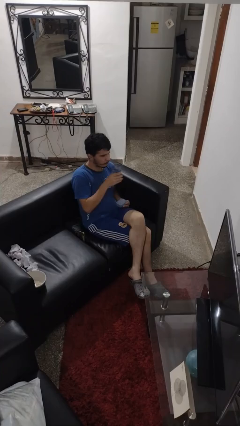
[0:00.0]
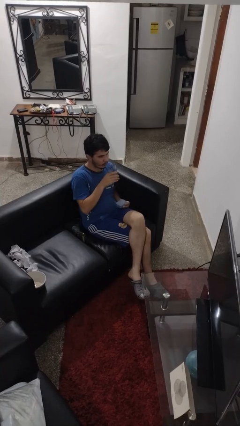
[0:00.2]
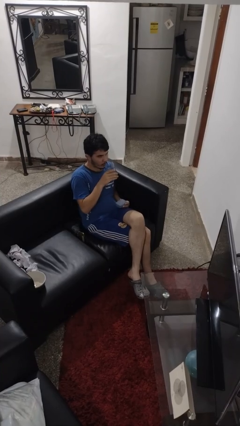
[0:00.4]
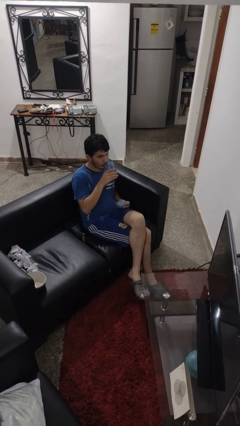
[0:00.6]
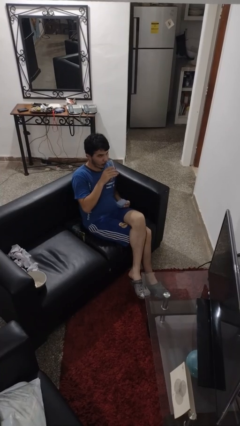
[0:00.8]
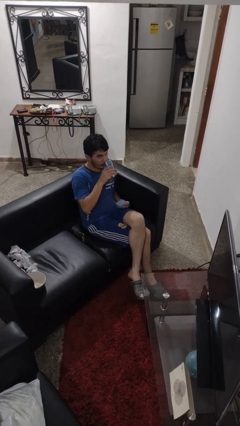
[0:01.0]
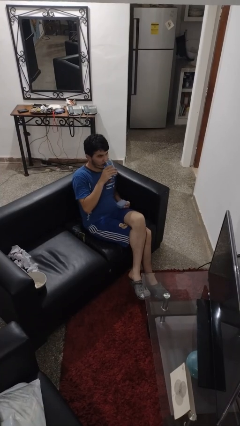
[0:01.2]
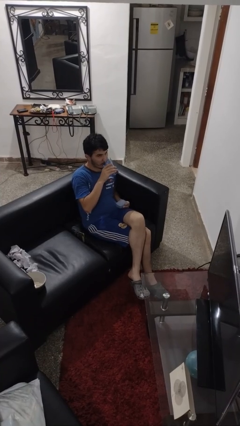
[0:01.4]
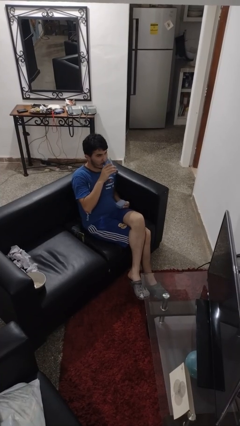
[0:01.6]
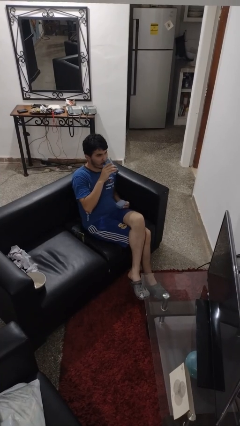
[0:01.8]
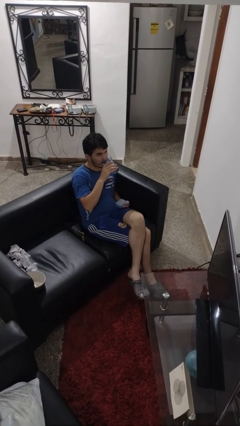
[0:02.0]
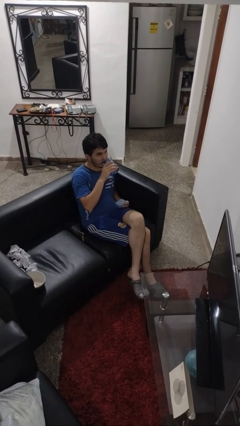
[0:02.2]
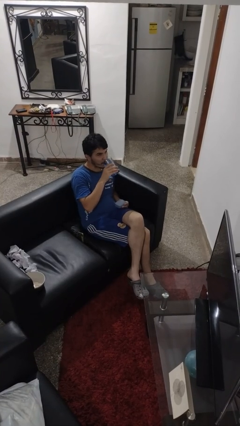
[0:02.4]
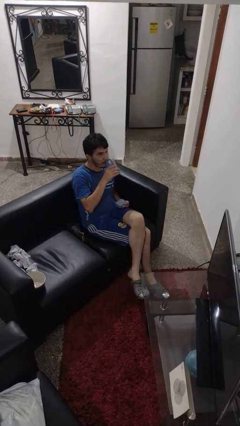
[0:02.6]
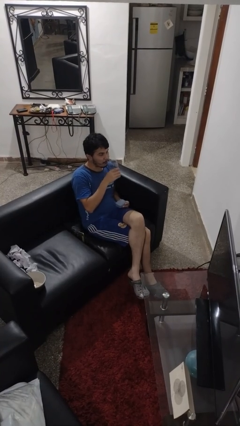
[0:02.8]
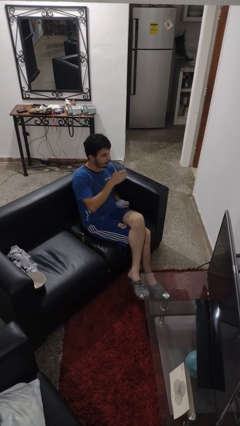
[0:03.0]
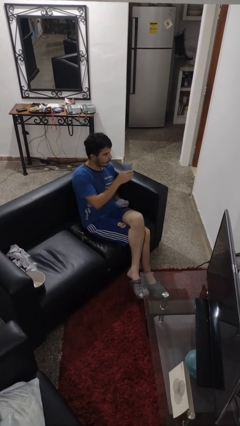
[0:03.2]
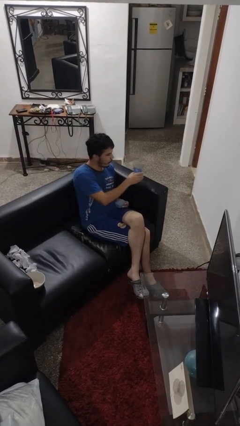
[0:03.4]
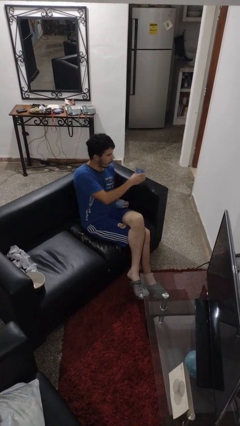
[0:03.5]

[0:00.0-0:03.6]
person drinks from cup

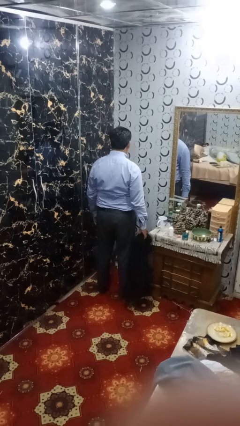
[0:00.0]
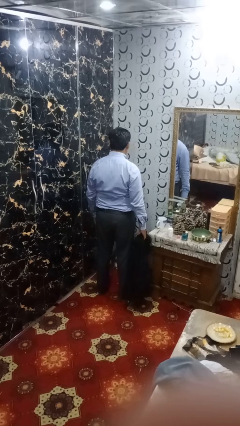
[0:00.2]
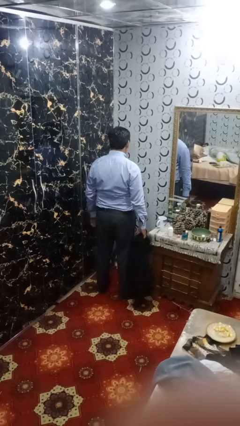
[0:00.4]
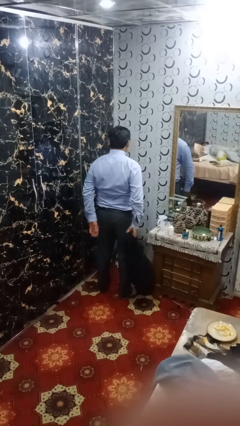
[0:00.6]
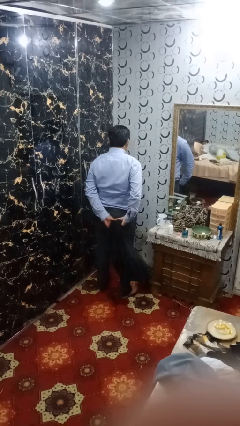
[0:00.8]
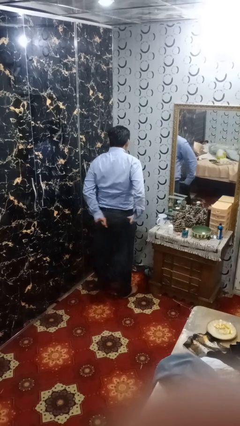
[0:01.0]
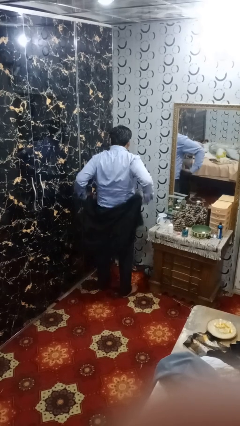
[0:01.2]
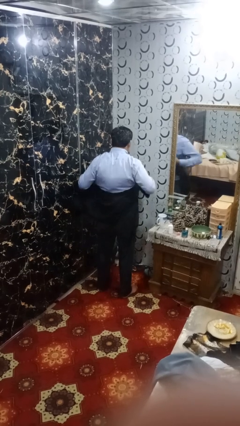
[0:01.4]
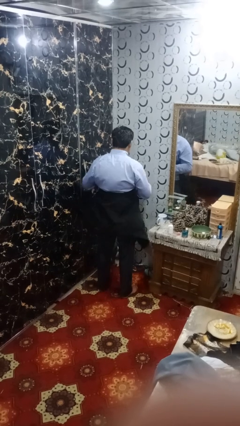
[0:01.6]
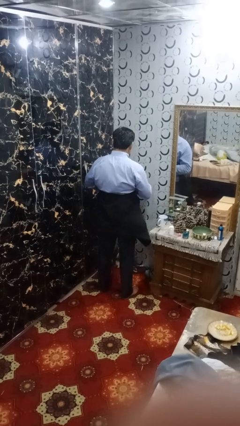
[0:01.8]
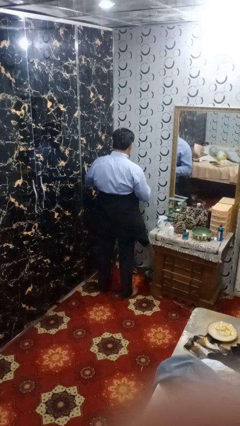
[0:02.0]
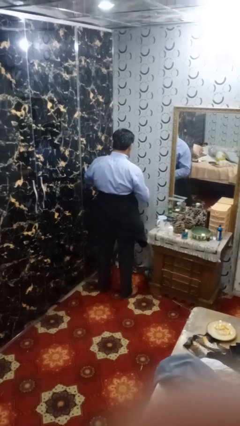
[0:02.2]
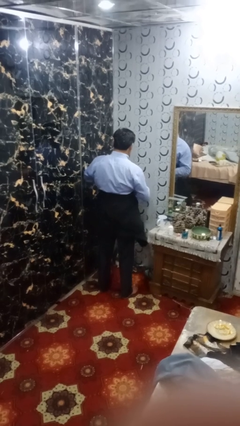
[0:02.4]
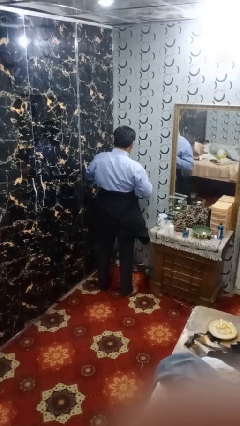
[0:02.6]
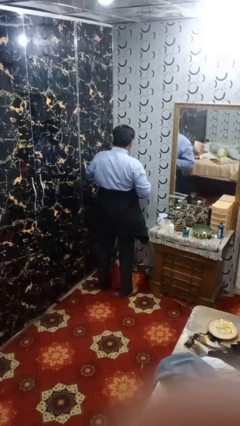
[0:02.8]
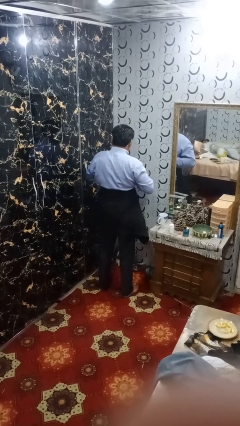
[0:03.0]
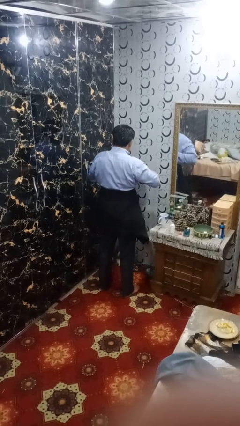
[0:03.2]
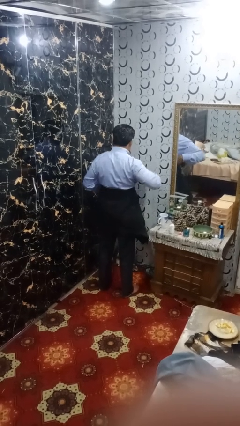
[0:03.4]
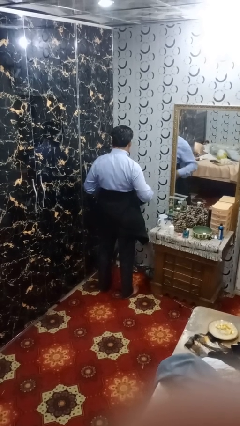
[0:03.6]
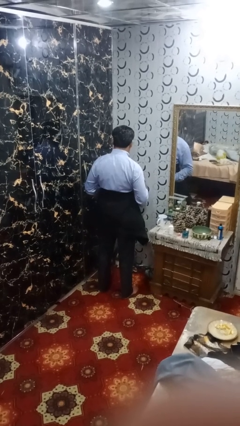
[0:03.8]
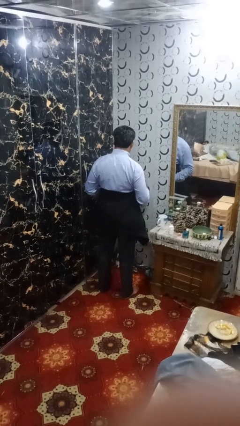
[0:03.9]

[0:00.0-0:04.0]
person ties jacket around waist

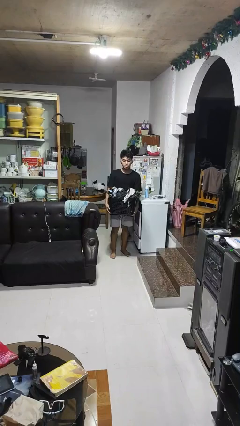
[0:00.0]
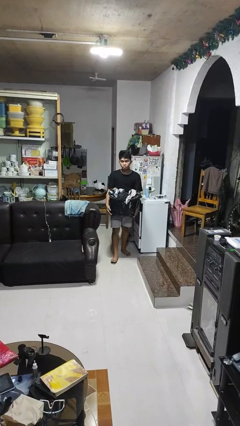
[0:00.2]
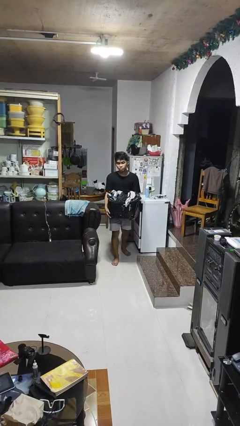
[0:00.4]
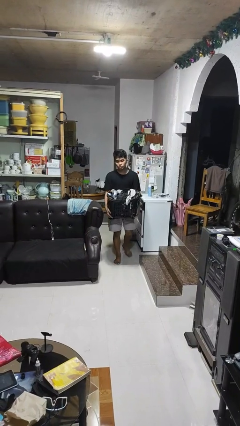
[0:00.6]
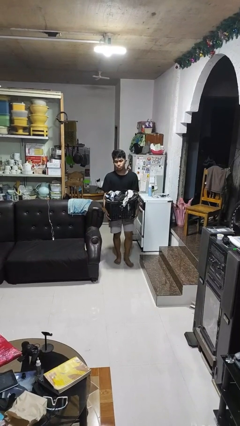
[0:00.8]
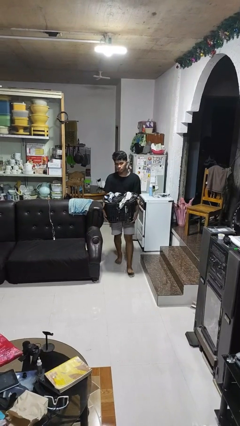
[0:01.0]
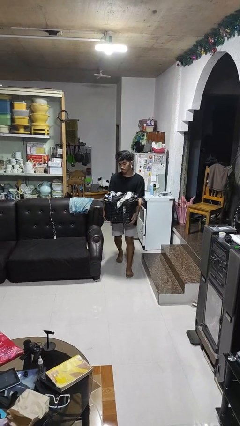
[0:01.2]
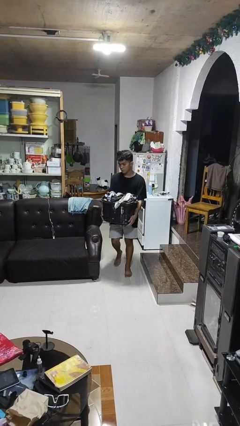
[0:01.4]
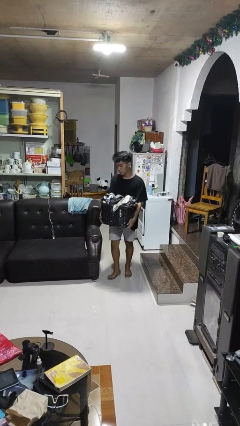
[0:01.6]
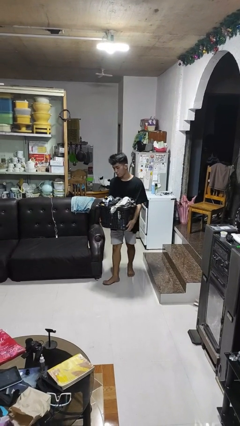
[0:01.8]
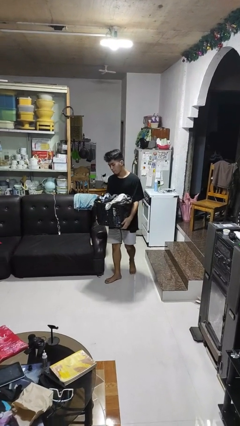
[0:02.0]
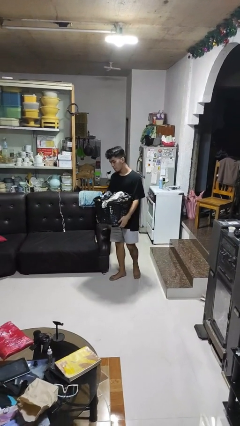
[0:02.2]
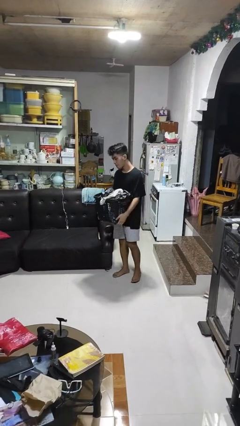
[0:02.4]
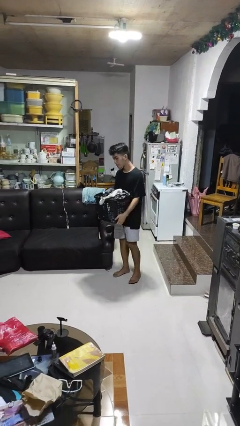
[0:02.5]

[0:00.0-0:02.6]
person carries laundry basket

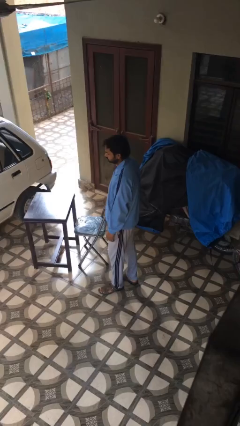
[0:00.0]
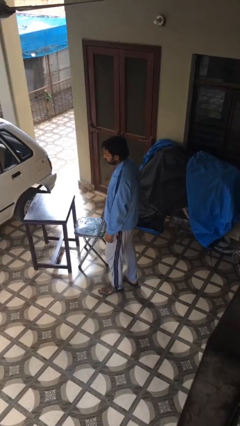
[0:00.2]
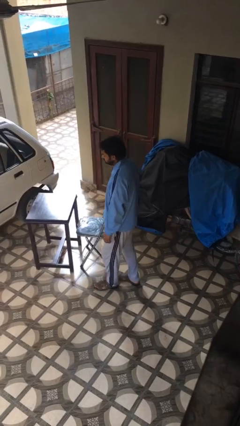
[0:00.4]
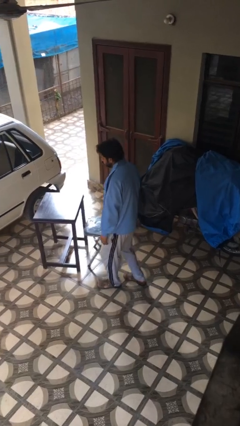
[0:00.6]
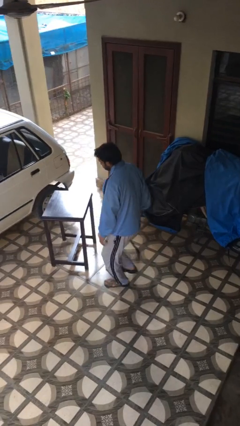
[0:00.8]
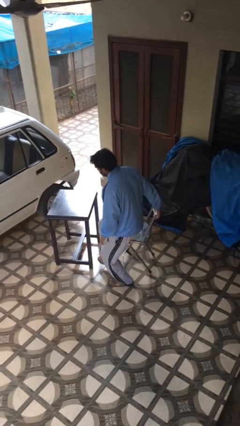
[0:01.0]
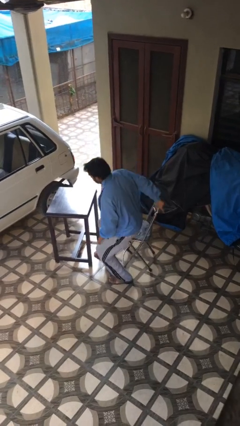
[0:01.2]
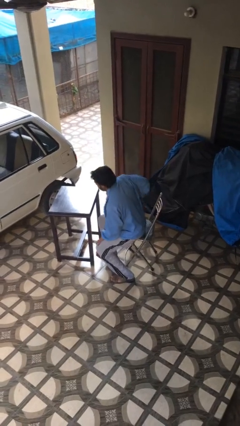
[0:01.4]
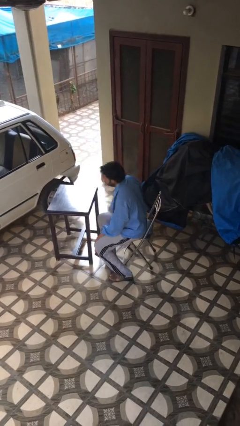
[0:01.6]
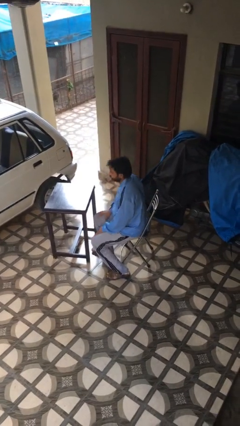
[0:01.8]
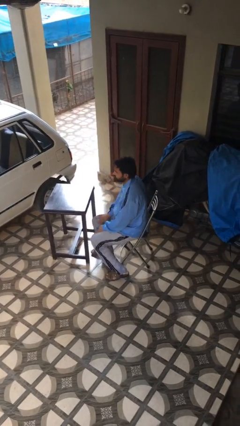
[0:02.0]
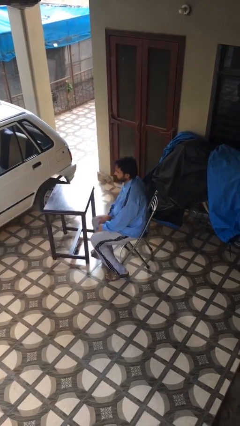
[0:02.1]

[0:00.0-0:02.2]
person sits down

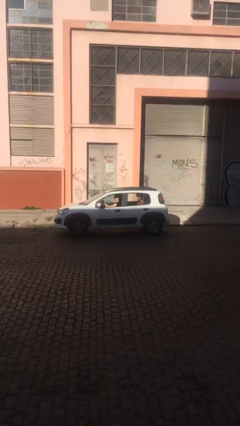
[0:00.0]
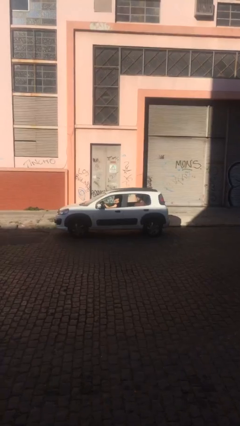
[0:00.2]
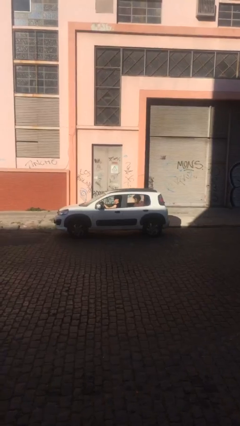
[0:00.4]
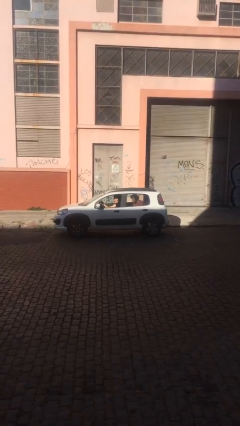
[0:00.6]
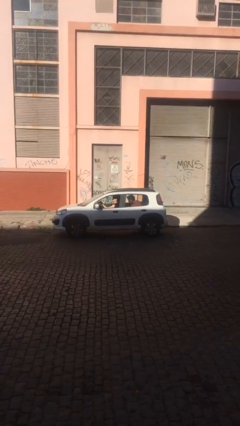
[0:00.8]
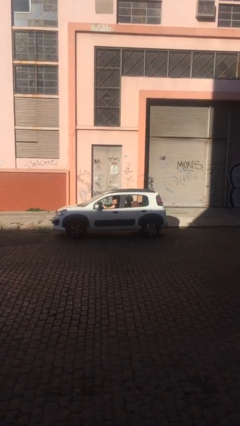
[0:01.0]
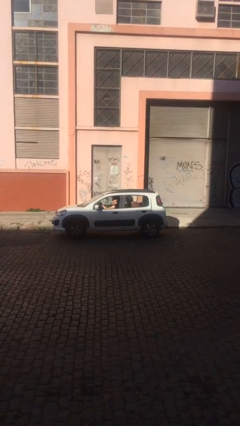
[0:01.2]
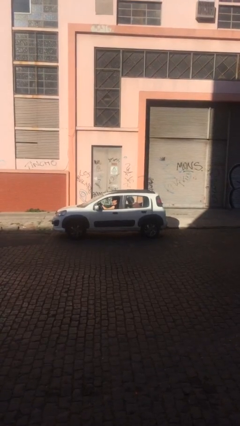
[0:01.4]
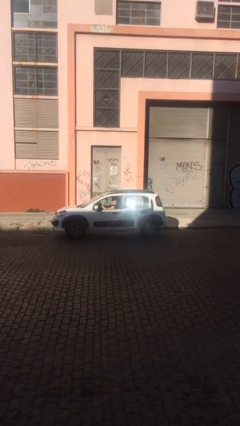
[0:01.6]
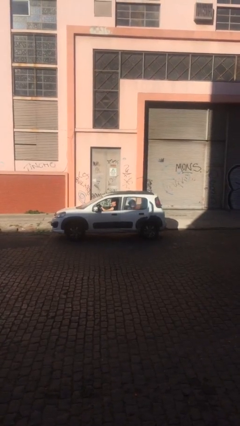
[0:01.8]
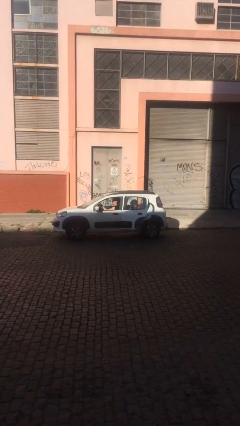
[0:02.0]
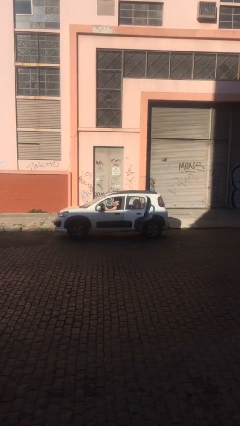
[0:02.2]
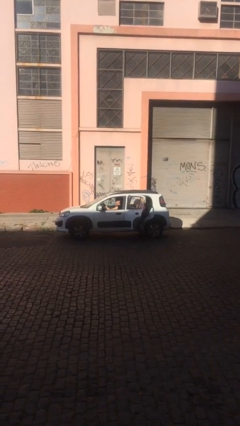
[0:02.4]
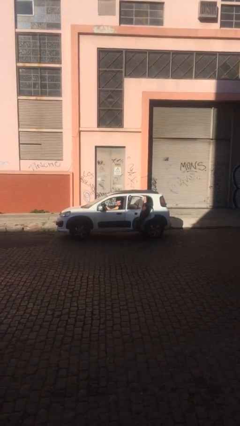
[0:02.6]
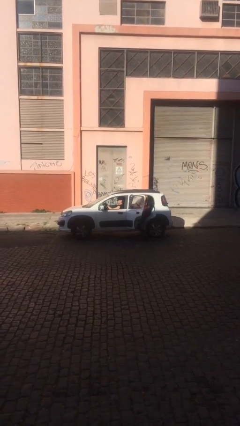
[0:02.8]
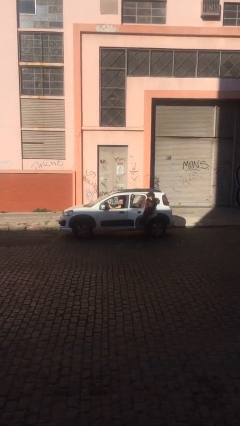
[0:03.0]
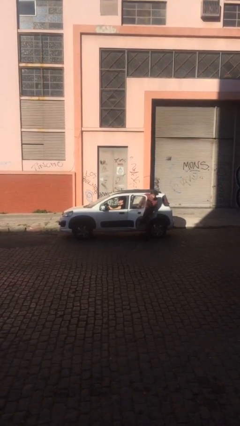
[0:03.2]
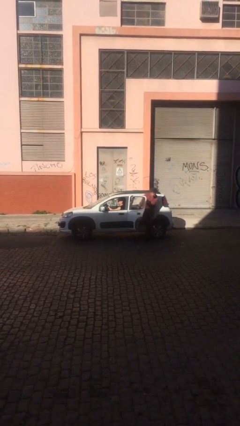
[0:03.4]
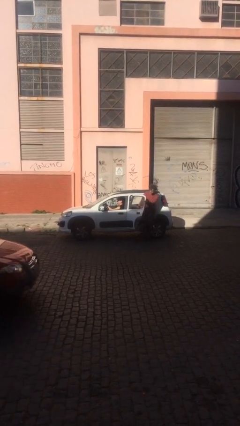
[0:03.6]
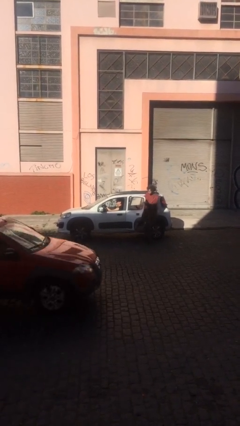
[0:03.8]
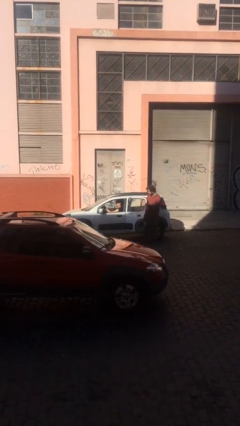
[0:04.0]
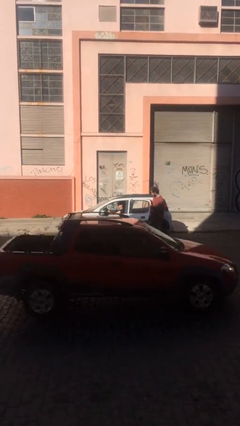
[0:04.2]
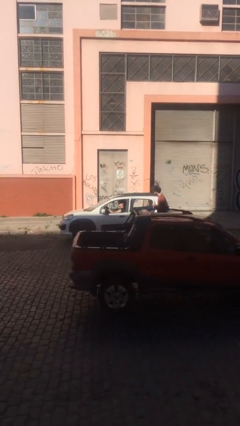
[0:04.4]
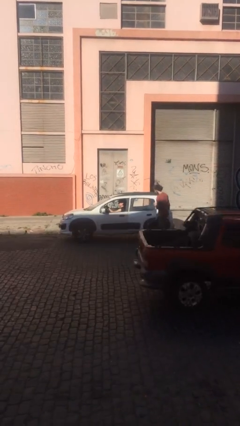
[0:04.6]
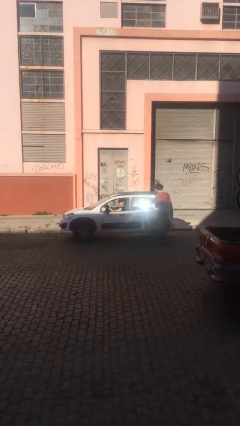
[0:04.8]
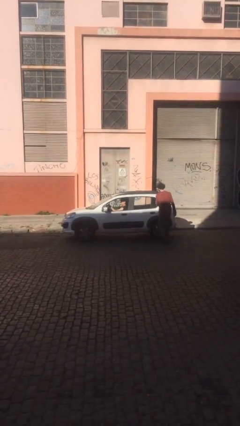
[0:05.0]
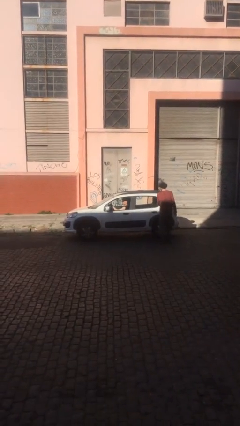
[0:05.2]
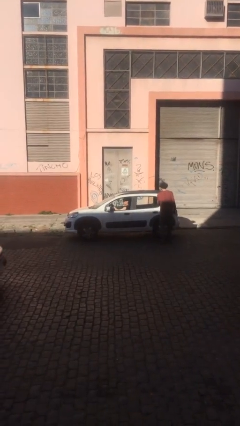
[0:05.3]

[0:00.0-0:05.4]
car drops off person
